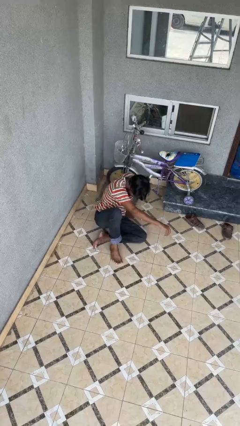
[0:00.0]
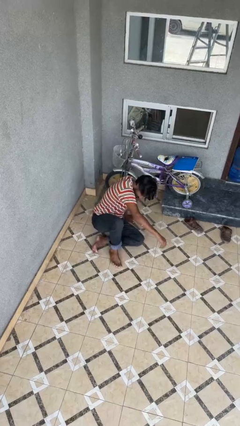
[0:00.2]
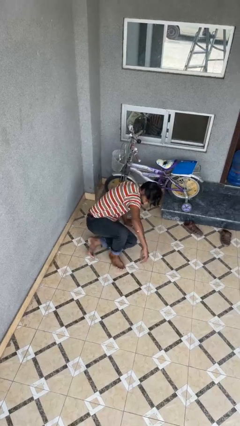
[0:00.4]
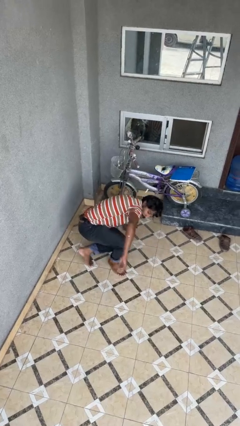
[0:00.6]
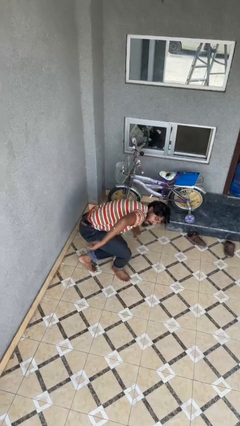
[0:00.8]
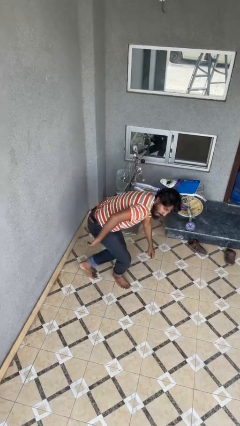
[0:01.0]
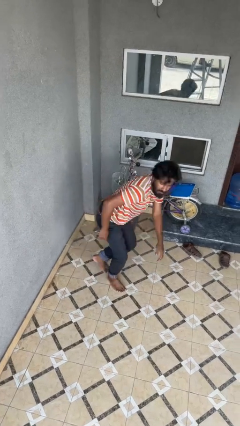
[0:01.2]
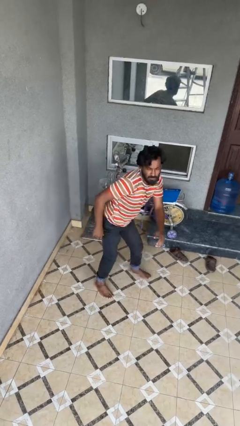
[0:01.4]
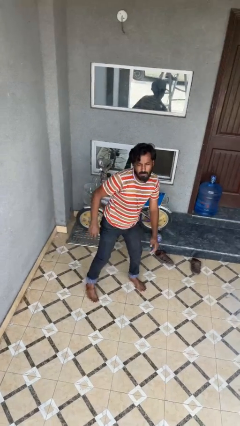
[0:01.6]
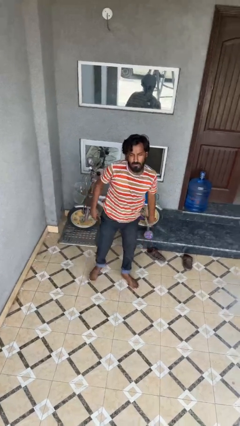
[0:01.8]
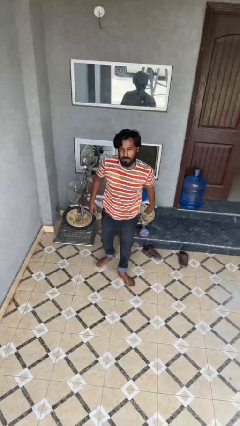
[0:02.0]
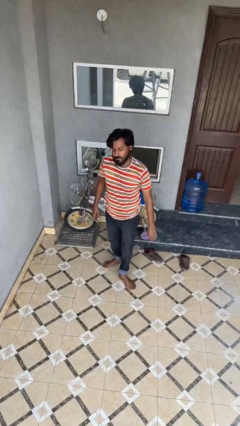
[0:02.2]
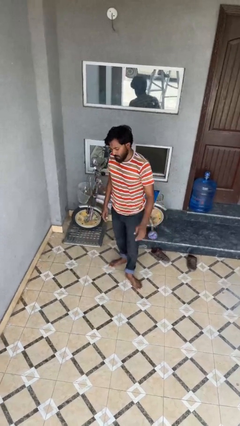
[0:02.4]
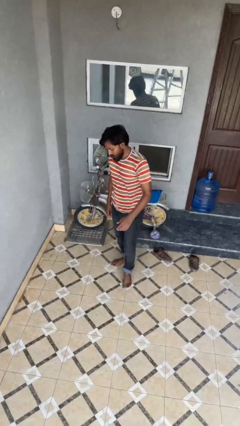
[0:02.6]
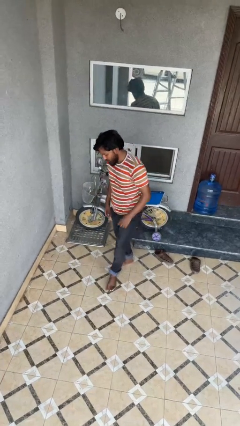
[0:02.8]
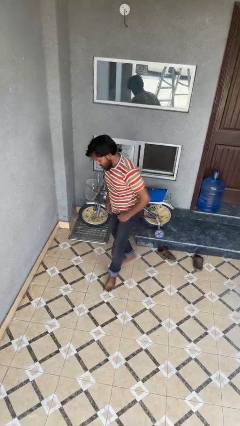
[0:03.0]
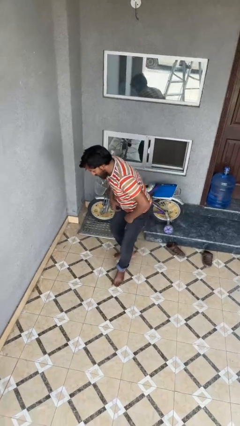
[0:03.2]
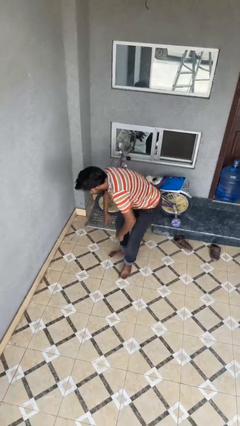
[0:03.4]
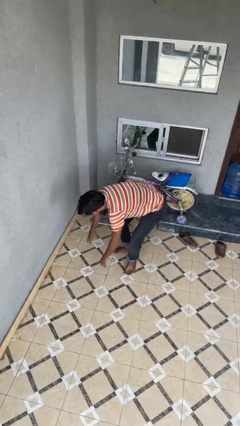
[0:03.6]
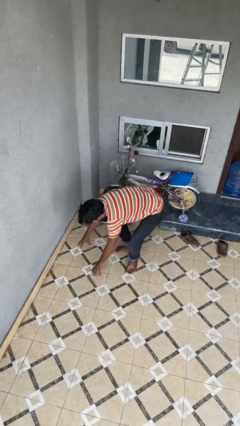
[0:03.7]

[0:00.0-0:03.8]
person stands up from floor

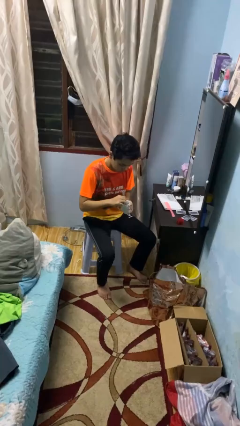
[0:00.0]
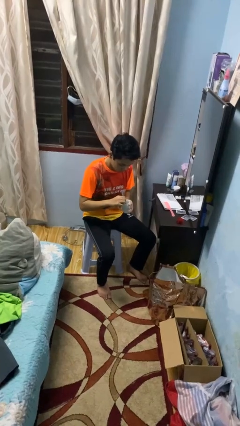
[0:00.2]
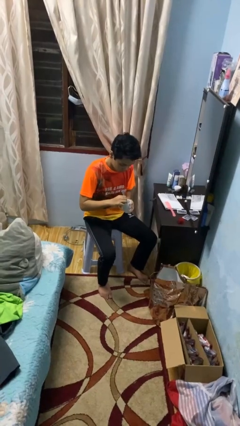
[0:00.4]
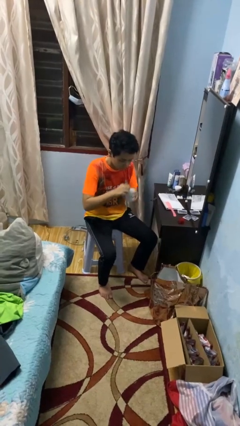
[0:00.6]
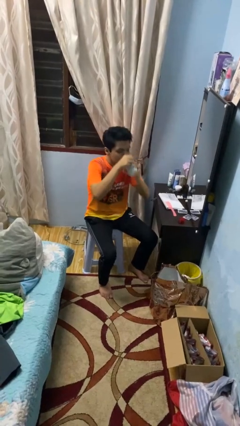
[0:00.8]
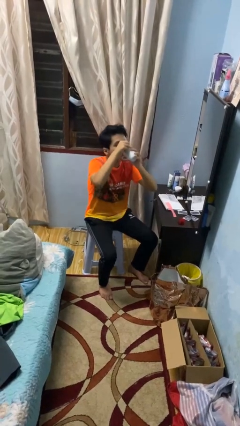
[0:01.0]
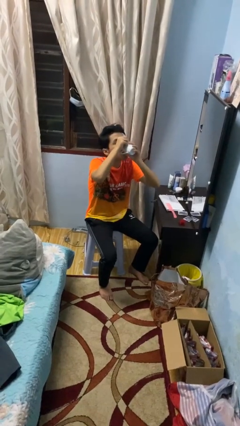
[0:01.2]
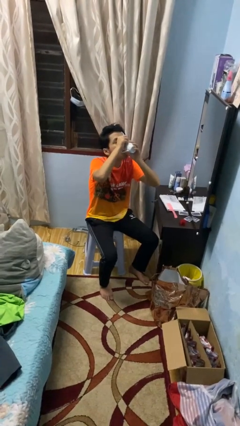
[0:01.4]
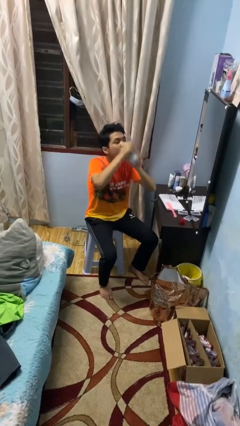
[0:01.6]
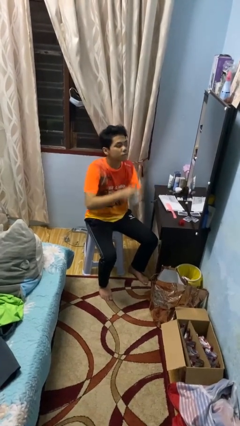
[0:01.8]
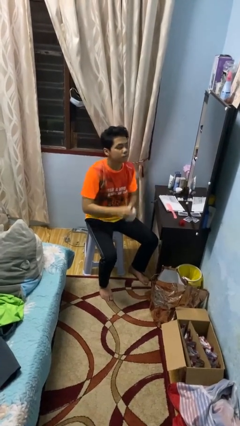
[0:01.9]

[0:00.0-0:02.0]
person drinks from mug

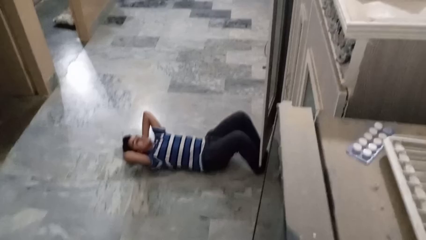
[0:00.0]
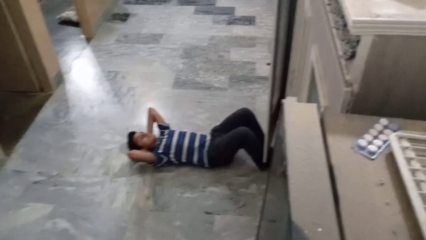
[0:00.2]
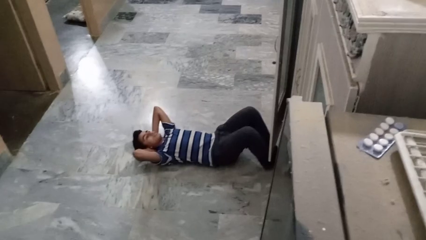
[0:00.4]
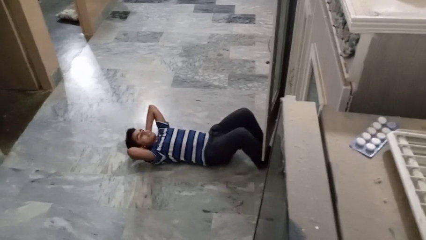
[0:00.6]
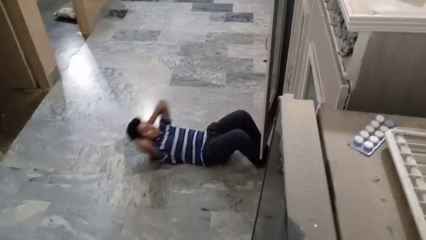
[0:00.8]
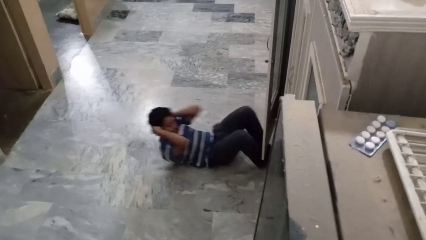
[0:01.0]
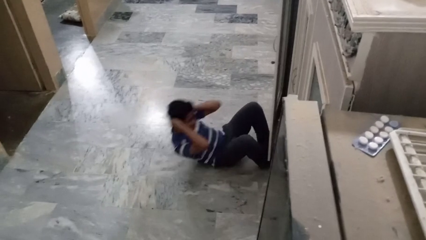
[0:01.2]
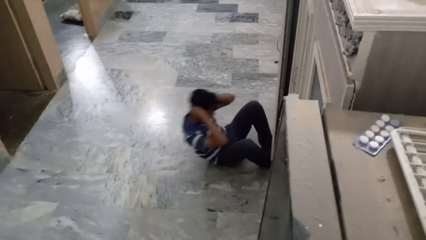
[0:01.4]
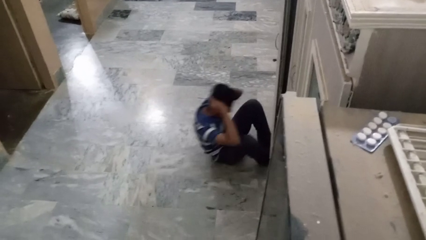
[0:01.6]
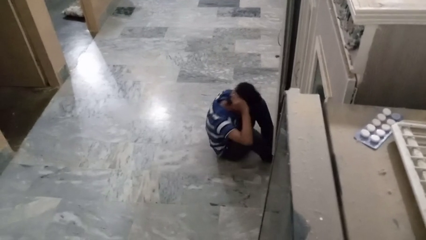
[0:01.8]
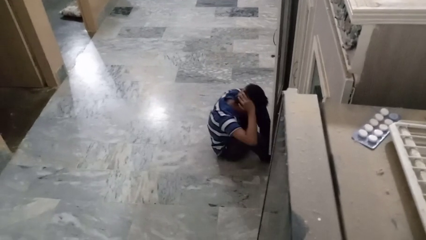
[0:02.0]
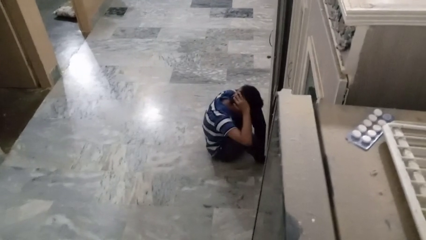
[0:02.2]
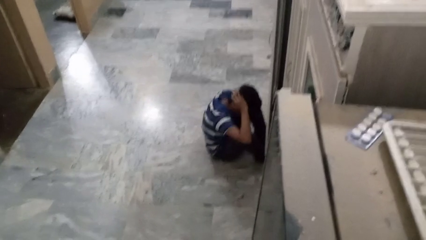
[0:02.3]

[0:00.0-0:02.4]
person exercises with situp

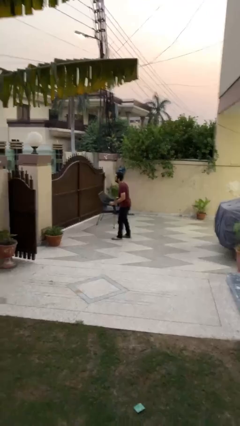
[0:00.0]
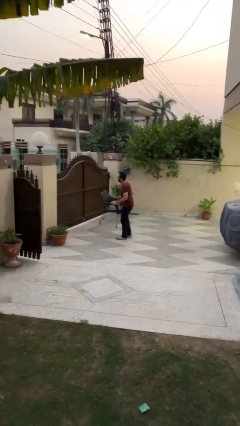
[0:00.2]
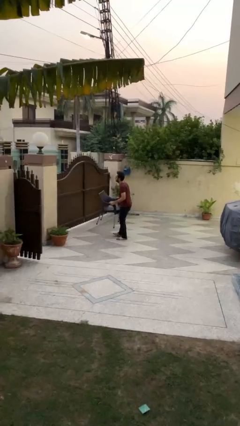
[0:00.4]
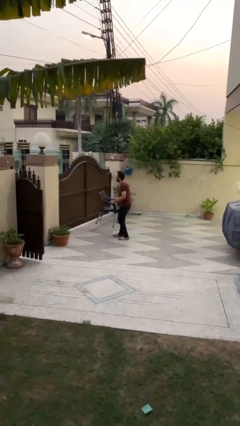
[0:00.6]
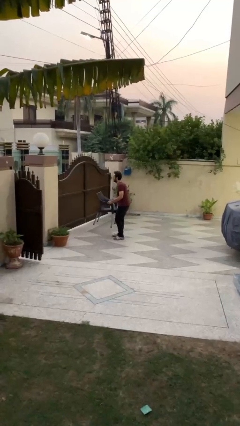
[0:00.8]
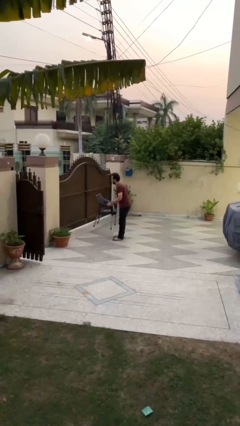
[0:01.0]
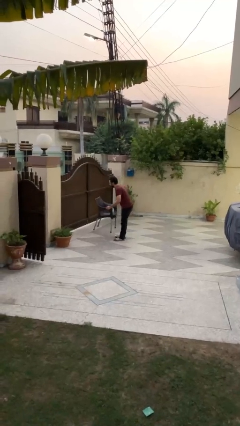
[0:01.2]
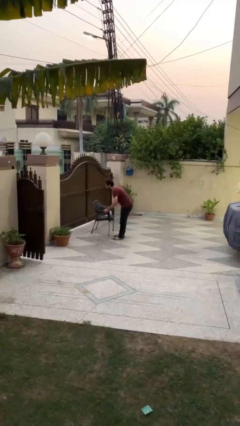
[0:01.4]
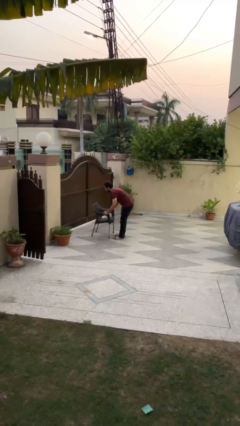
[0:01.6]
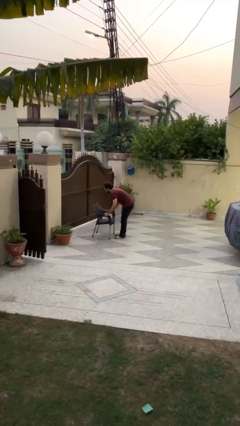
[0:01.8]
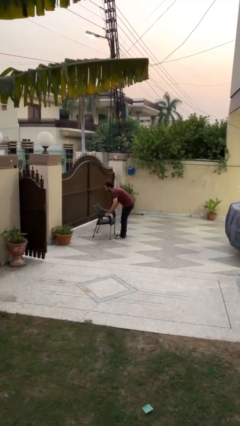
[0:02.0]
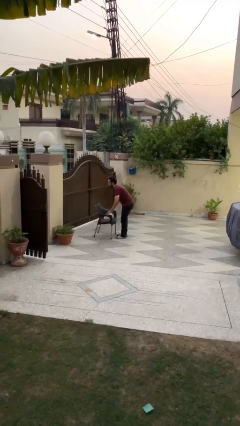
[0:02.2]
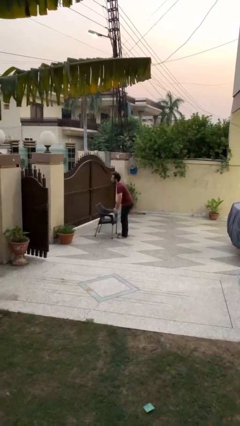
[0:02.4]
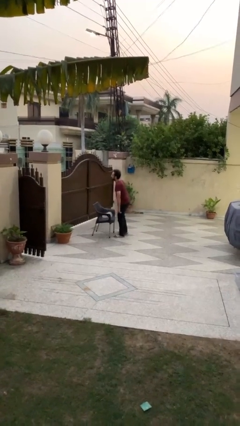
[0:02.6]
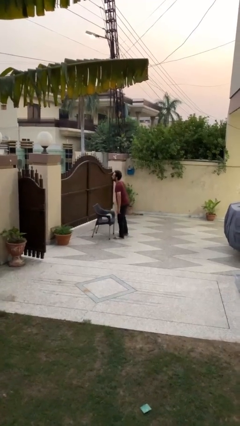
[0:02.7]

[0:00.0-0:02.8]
person puts down object on floor

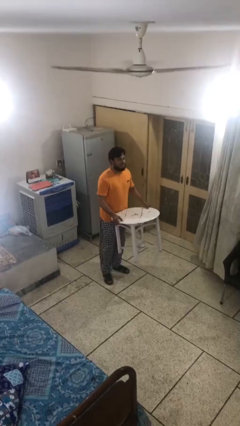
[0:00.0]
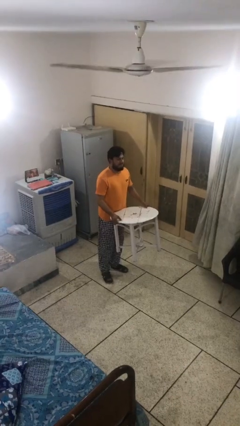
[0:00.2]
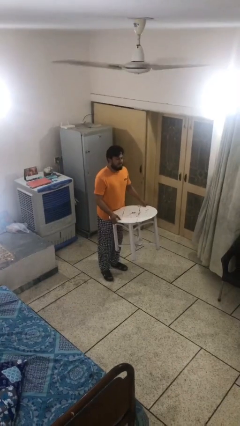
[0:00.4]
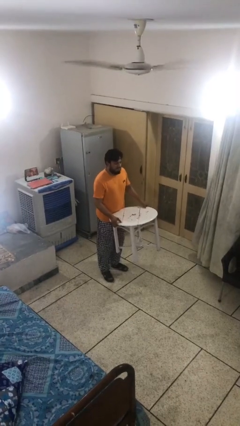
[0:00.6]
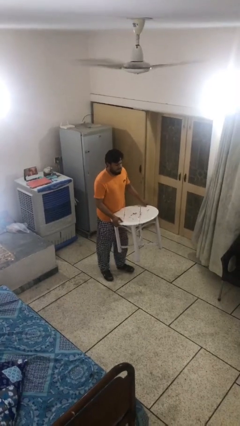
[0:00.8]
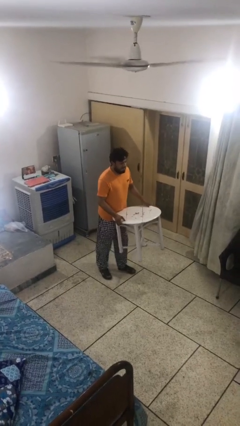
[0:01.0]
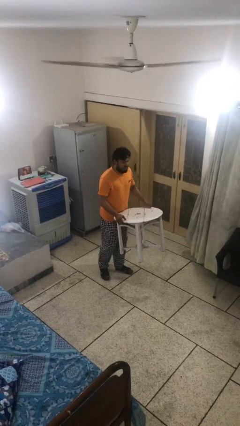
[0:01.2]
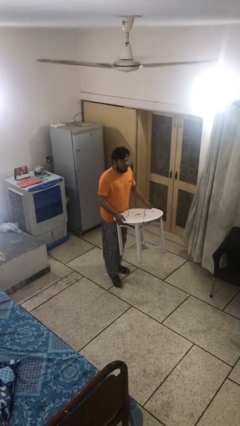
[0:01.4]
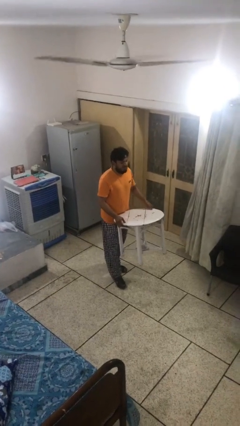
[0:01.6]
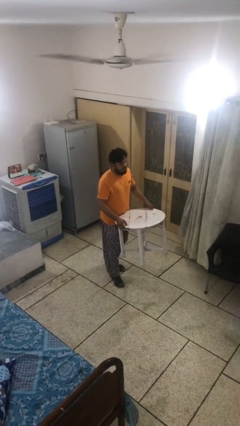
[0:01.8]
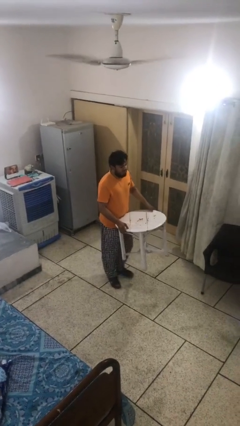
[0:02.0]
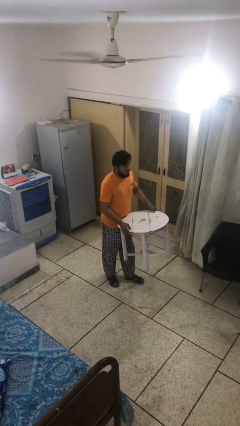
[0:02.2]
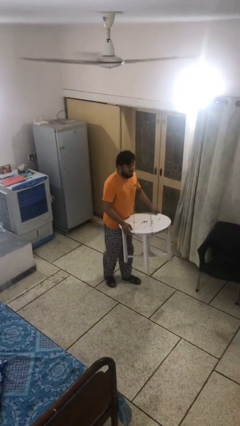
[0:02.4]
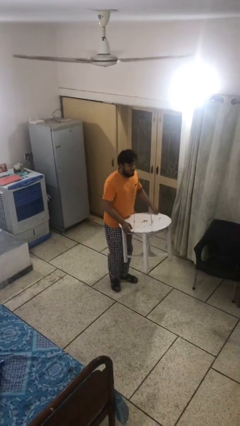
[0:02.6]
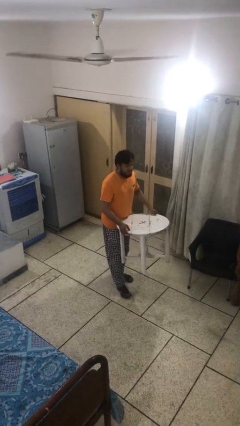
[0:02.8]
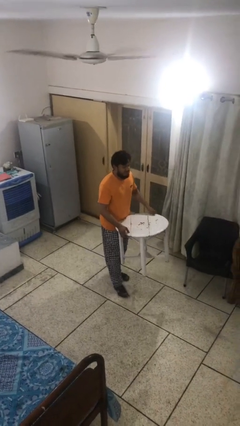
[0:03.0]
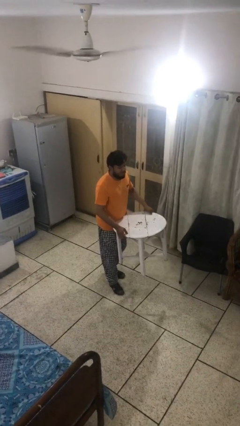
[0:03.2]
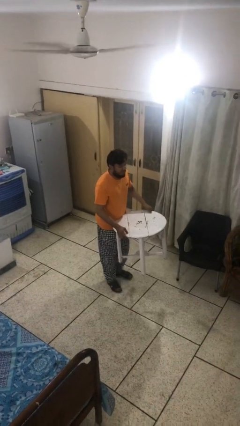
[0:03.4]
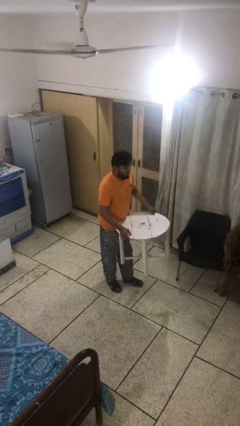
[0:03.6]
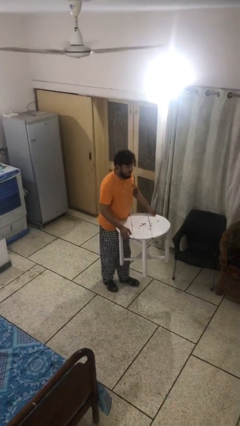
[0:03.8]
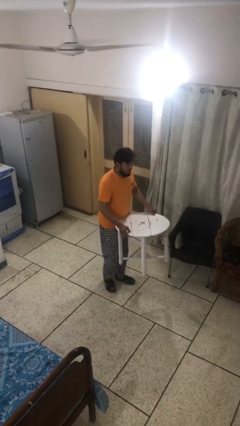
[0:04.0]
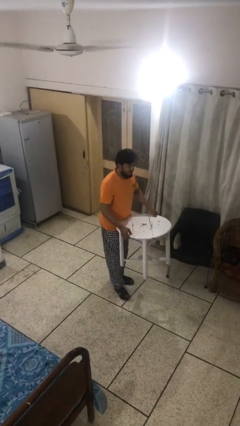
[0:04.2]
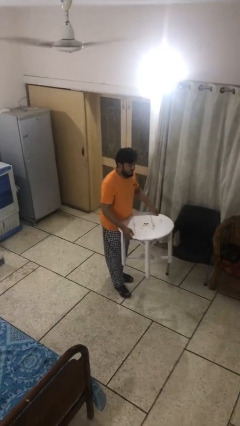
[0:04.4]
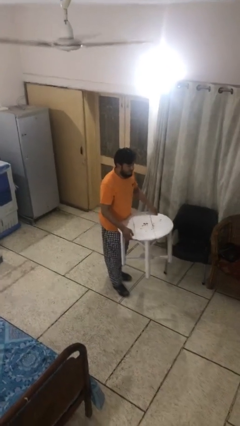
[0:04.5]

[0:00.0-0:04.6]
person carries heavy object

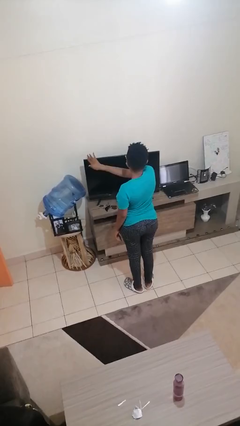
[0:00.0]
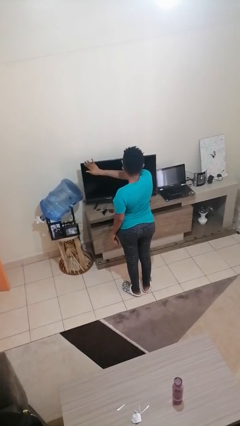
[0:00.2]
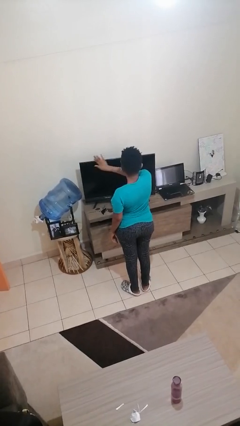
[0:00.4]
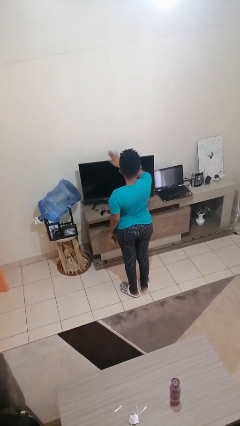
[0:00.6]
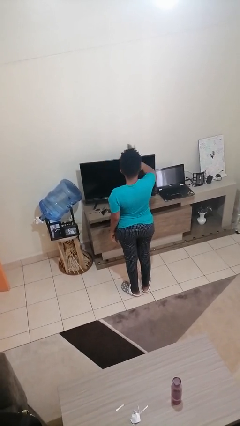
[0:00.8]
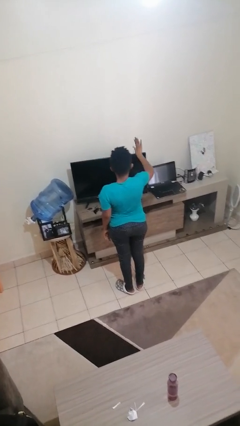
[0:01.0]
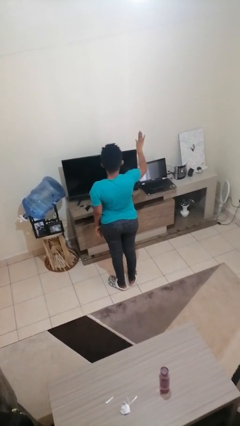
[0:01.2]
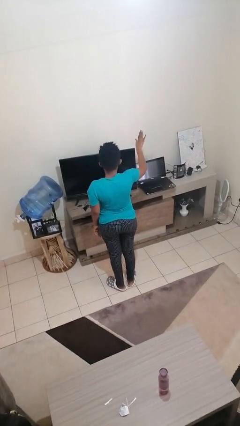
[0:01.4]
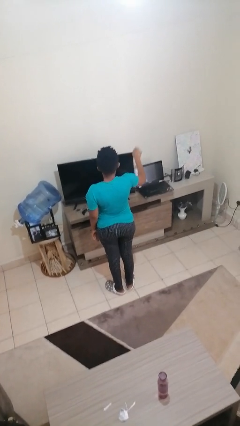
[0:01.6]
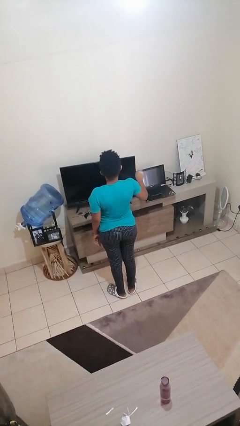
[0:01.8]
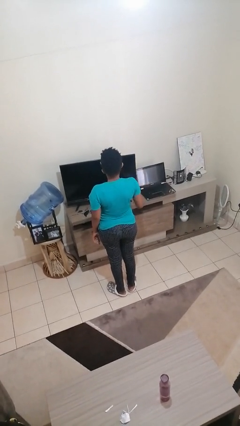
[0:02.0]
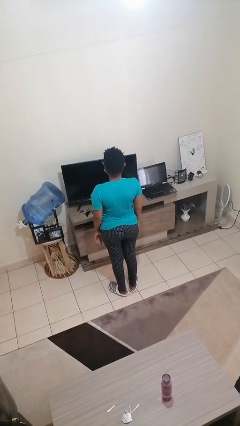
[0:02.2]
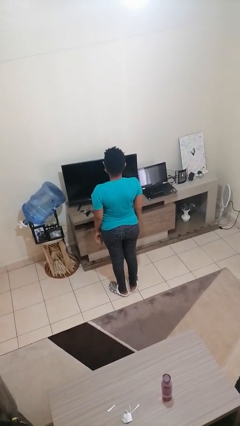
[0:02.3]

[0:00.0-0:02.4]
person gestures swipe right
